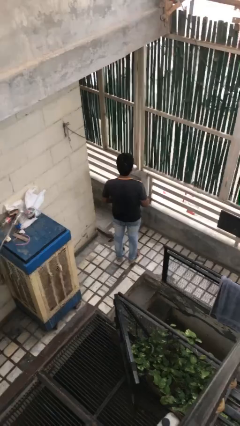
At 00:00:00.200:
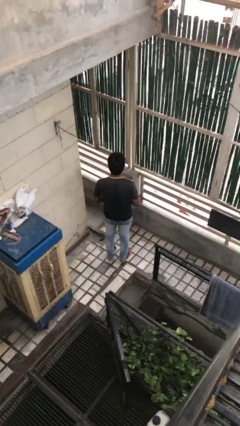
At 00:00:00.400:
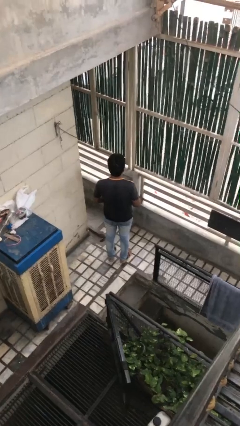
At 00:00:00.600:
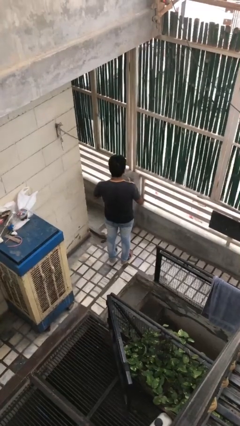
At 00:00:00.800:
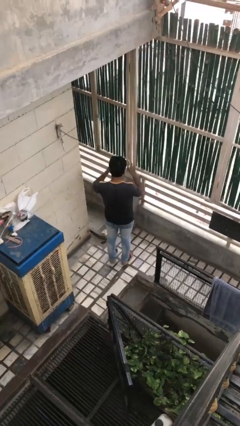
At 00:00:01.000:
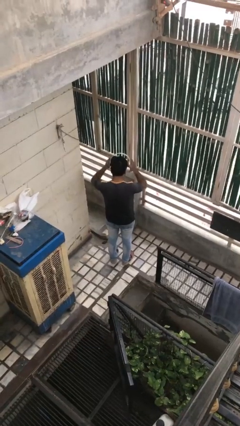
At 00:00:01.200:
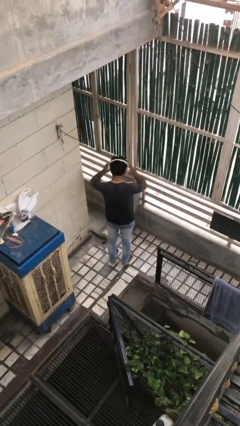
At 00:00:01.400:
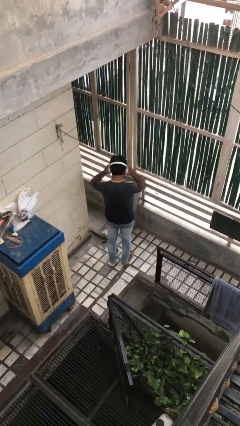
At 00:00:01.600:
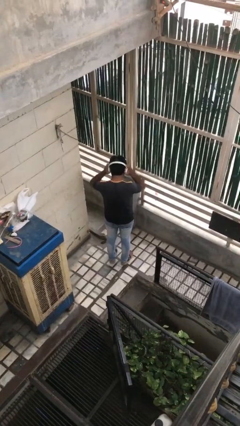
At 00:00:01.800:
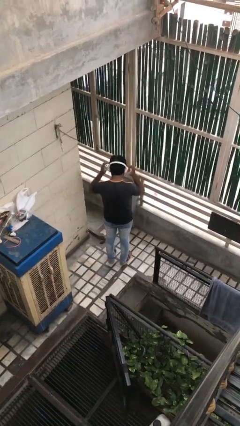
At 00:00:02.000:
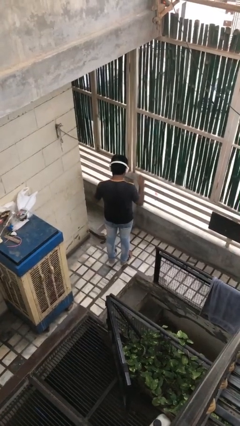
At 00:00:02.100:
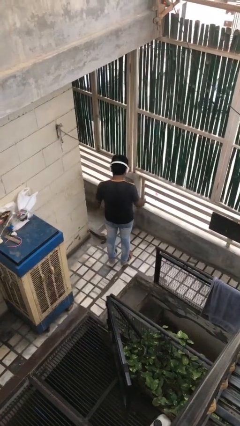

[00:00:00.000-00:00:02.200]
person puts on headphones

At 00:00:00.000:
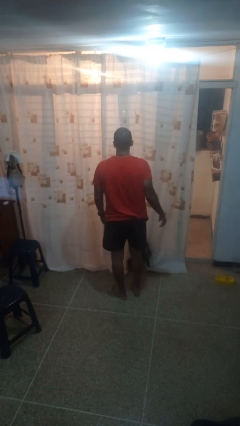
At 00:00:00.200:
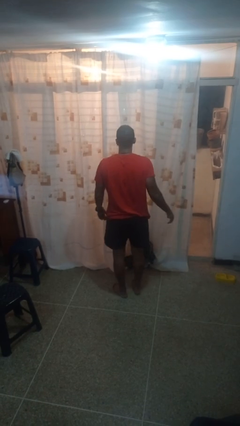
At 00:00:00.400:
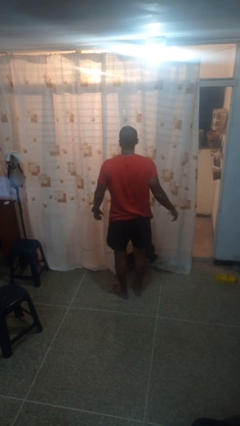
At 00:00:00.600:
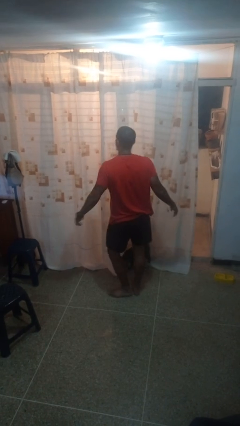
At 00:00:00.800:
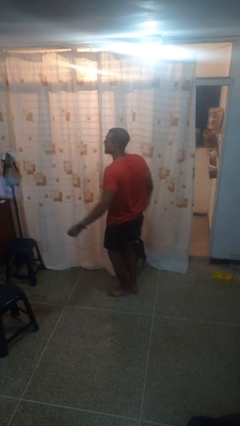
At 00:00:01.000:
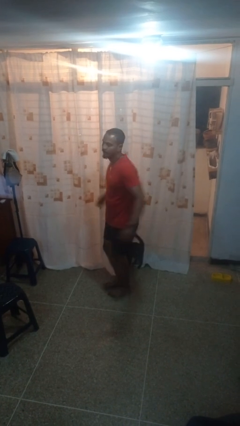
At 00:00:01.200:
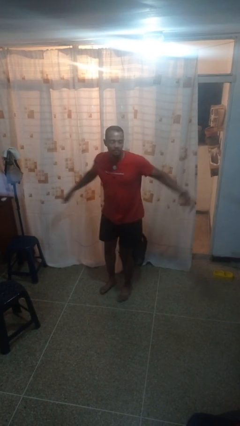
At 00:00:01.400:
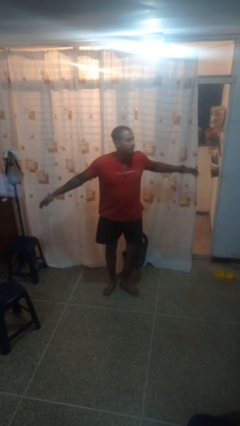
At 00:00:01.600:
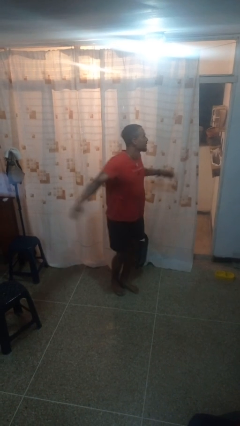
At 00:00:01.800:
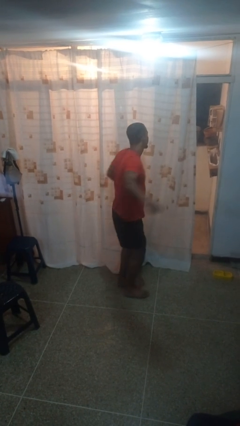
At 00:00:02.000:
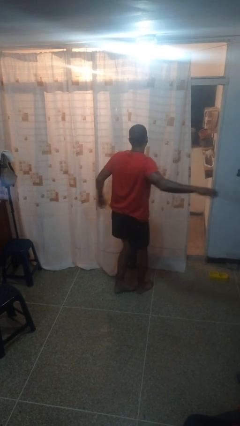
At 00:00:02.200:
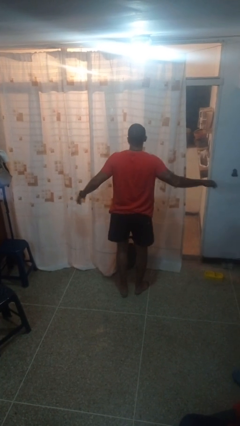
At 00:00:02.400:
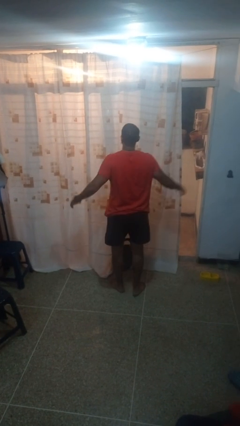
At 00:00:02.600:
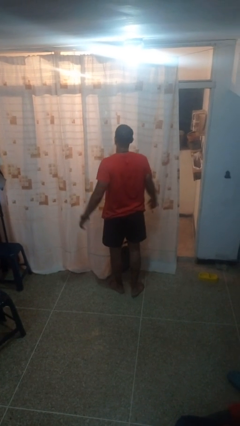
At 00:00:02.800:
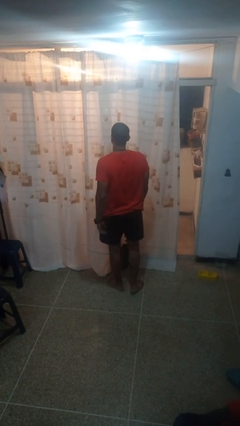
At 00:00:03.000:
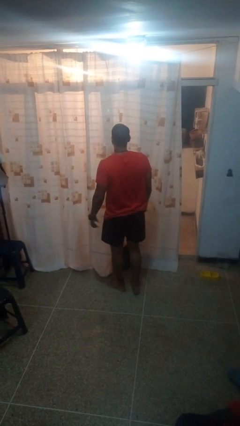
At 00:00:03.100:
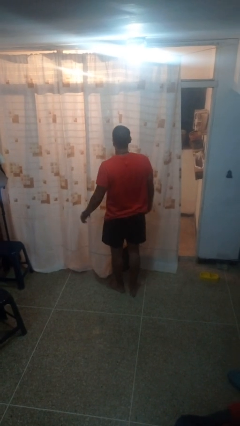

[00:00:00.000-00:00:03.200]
person twirls

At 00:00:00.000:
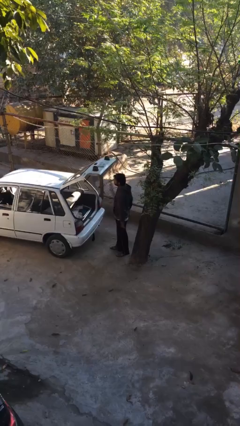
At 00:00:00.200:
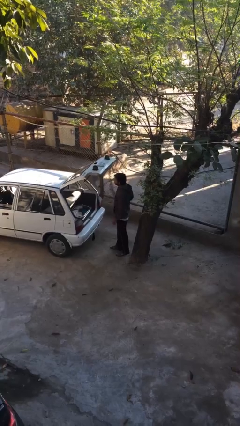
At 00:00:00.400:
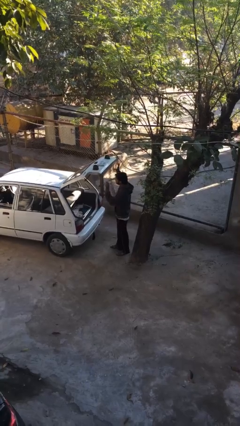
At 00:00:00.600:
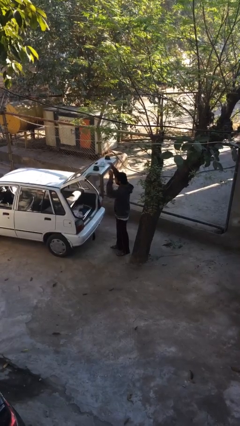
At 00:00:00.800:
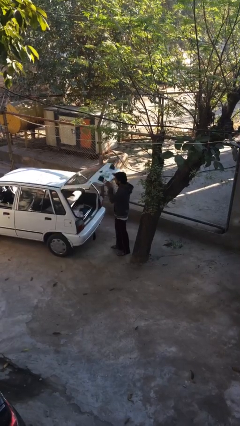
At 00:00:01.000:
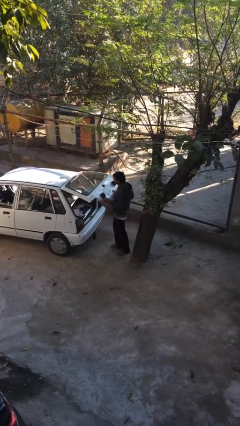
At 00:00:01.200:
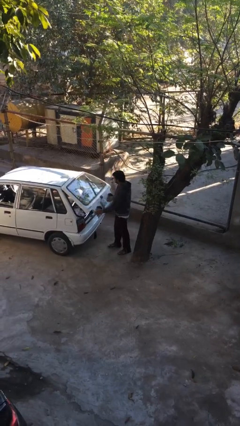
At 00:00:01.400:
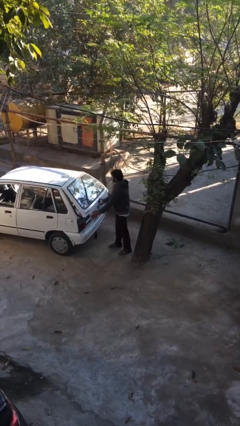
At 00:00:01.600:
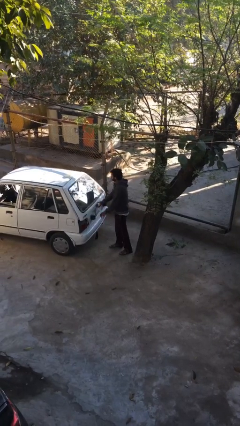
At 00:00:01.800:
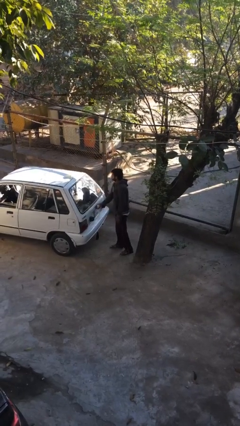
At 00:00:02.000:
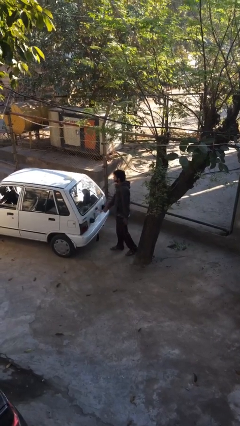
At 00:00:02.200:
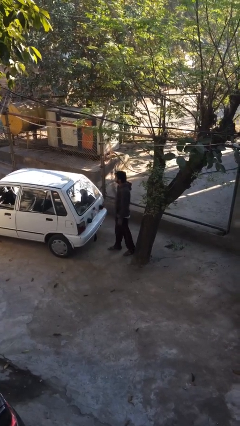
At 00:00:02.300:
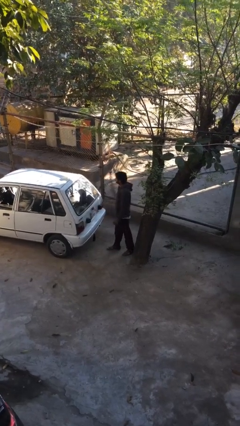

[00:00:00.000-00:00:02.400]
person closes car trunk

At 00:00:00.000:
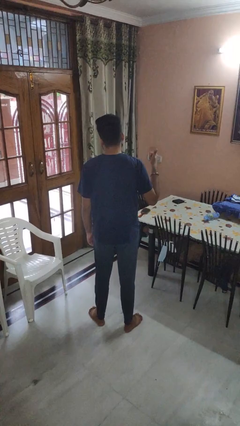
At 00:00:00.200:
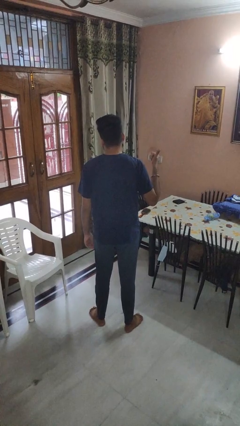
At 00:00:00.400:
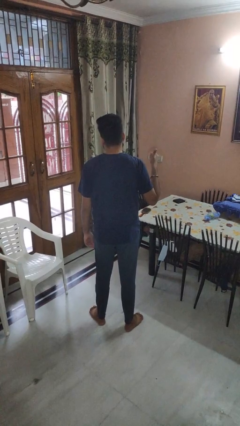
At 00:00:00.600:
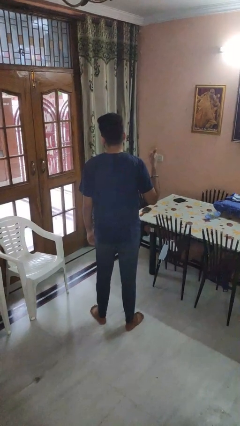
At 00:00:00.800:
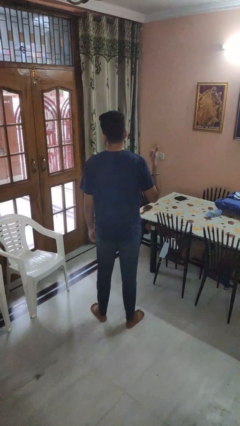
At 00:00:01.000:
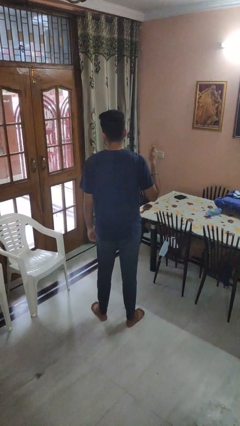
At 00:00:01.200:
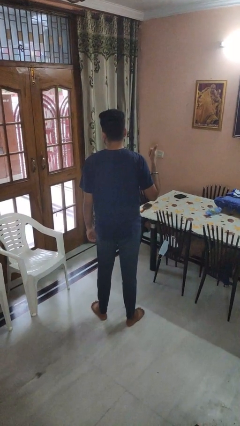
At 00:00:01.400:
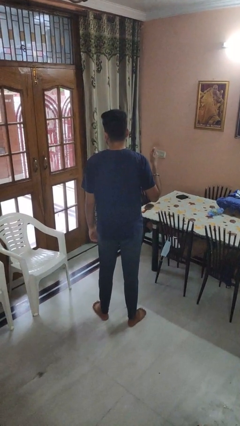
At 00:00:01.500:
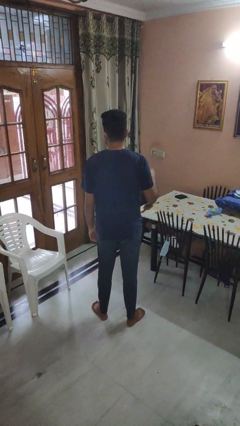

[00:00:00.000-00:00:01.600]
person gestures hang loose

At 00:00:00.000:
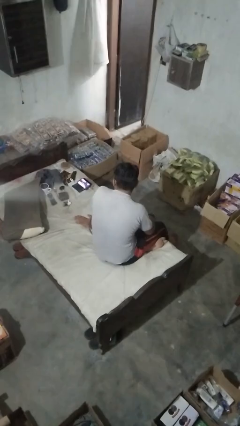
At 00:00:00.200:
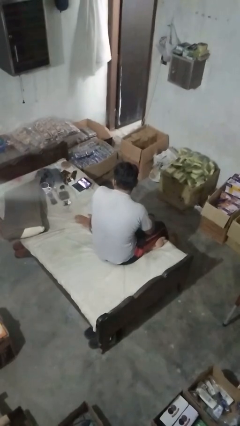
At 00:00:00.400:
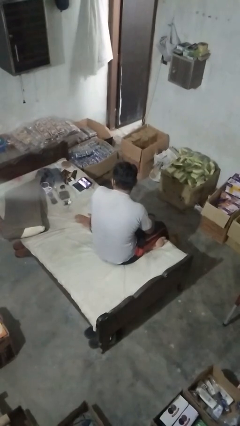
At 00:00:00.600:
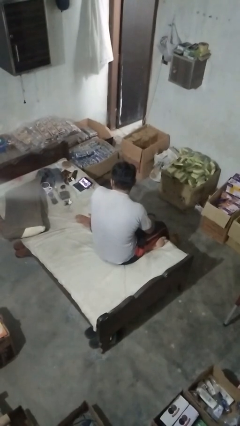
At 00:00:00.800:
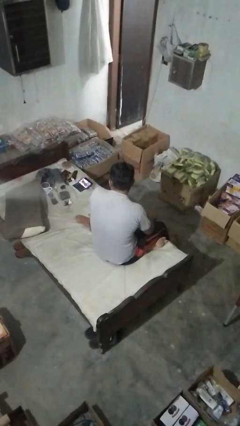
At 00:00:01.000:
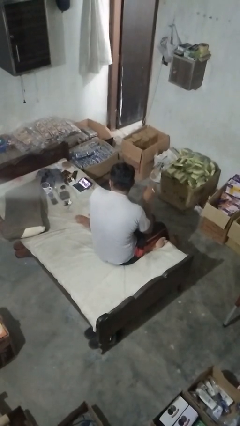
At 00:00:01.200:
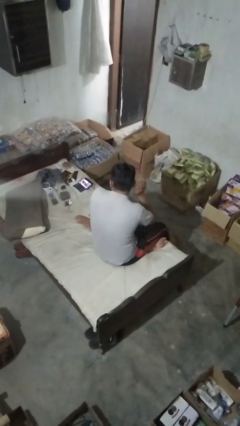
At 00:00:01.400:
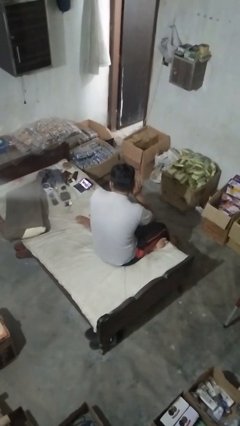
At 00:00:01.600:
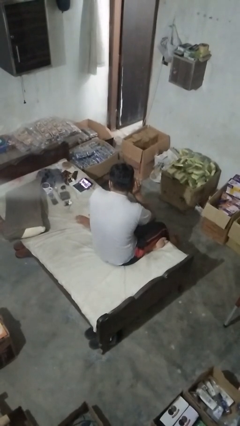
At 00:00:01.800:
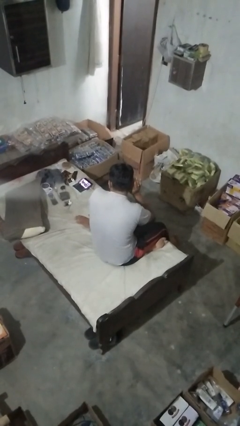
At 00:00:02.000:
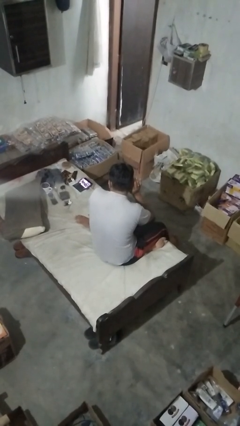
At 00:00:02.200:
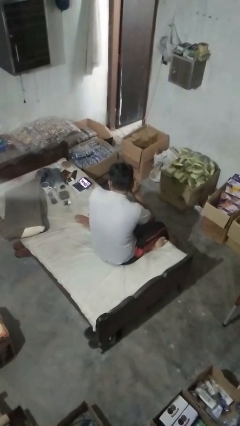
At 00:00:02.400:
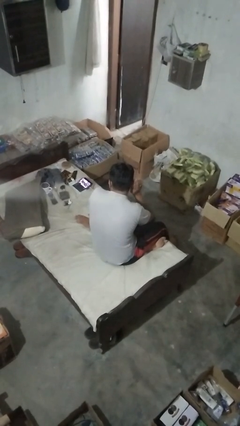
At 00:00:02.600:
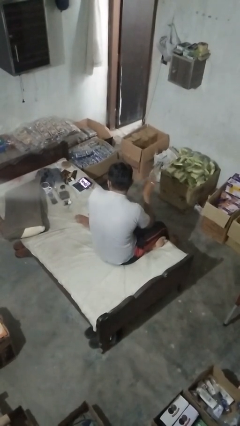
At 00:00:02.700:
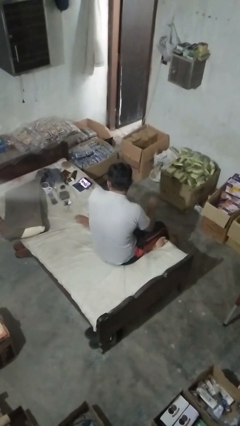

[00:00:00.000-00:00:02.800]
person gestures listen closely

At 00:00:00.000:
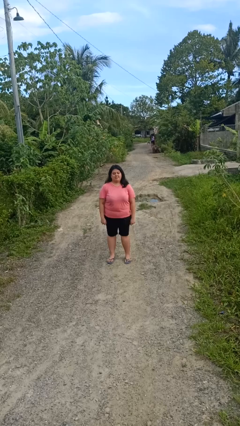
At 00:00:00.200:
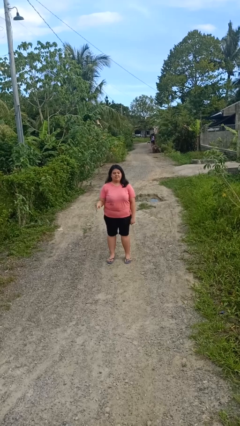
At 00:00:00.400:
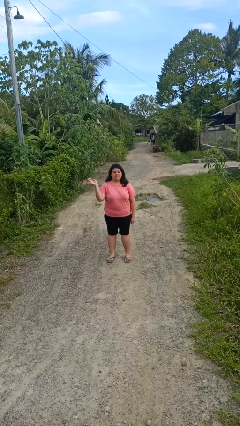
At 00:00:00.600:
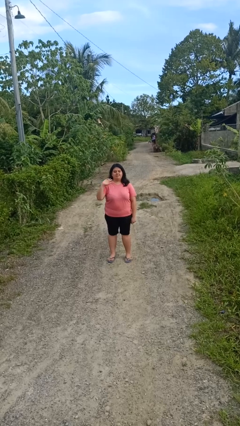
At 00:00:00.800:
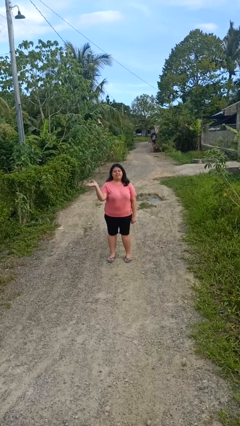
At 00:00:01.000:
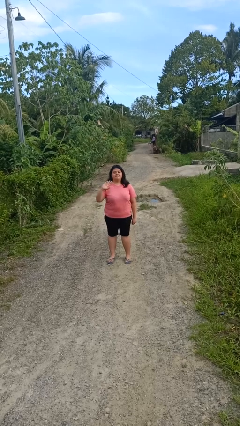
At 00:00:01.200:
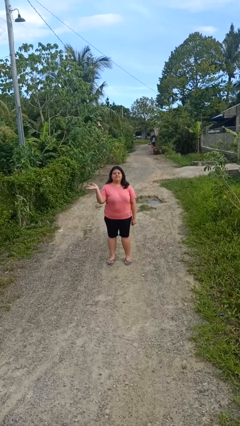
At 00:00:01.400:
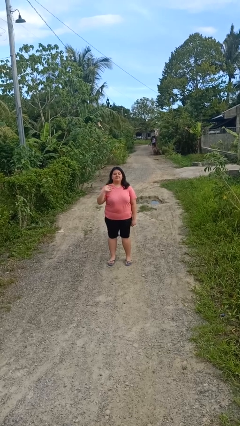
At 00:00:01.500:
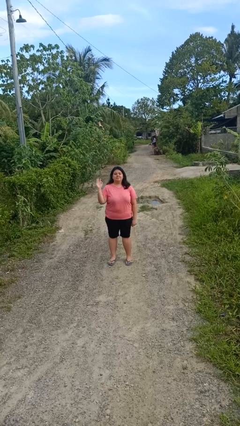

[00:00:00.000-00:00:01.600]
person waves at person

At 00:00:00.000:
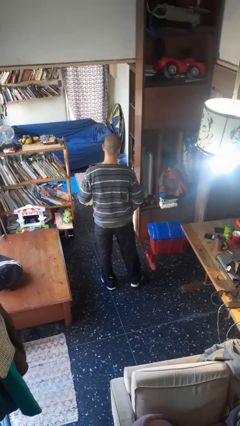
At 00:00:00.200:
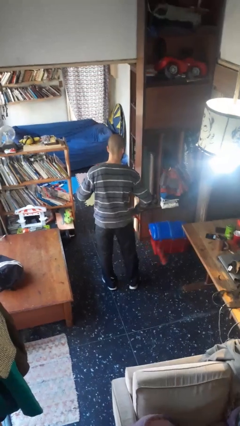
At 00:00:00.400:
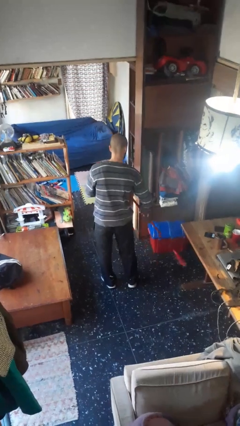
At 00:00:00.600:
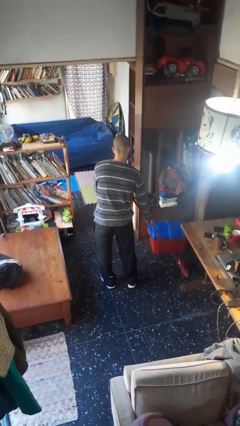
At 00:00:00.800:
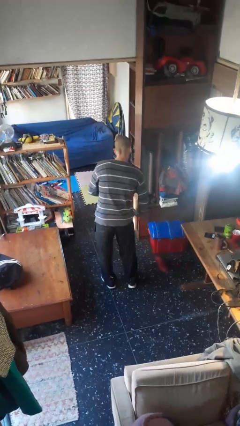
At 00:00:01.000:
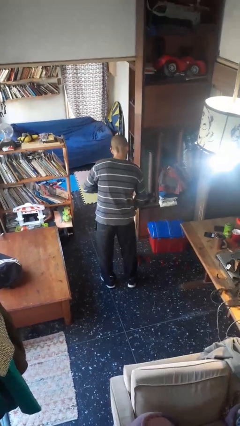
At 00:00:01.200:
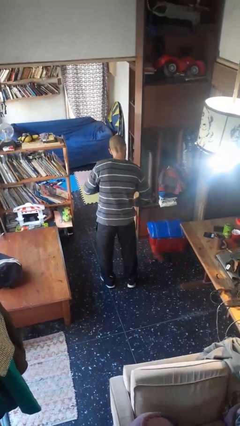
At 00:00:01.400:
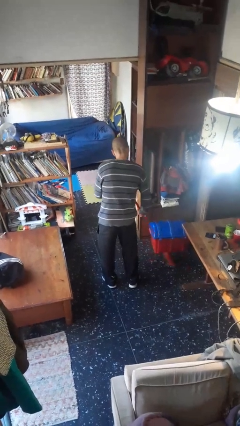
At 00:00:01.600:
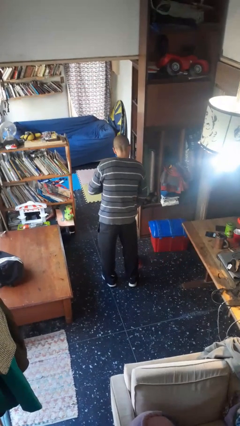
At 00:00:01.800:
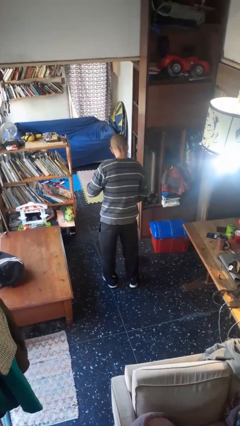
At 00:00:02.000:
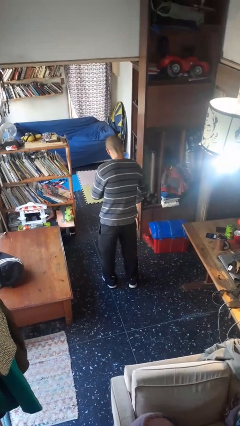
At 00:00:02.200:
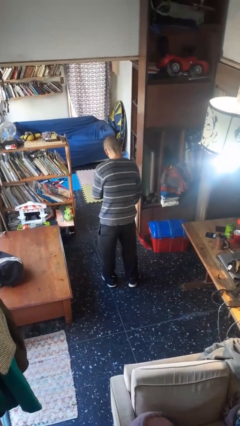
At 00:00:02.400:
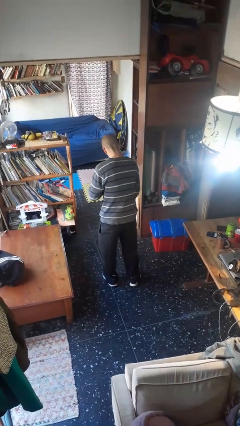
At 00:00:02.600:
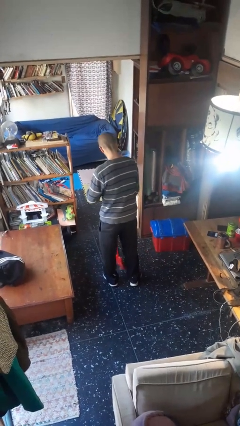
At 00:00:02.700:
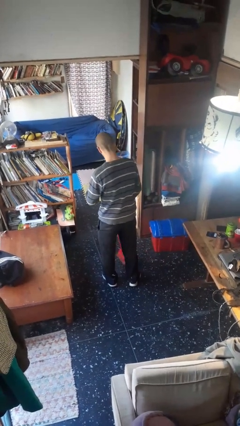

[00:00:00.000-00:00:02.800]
person sweeps floor
